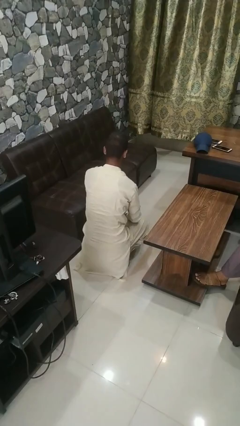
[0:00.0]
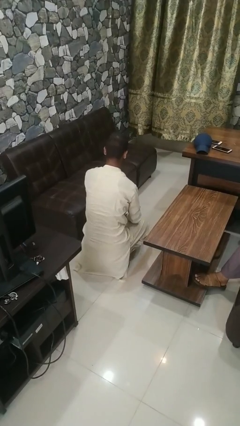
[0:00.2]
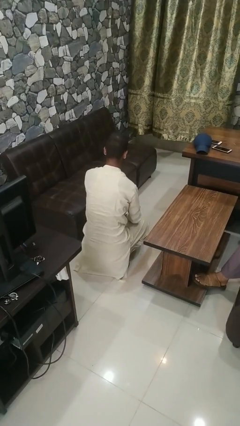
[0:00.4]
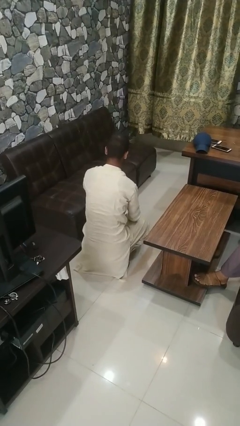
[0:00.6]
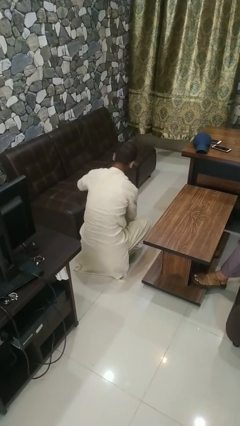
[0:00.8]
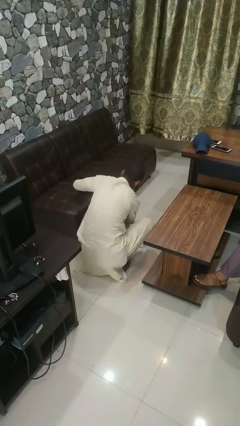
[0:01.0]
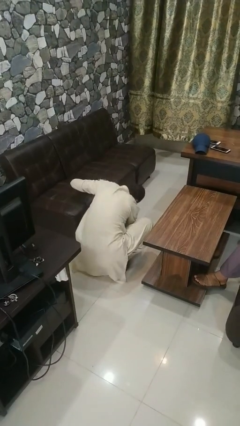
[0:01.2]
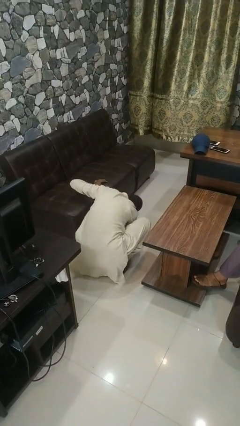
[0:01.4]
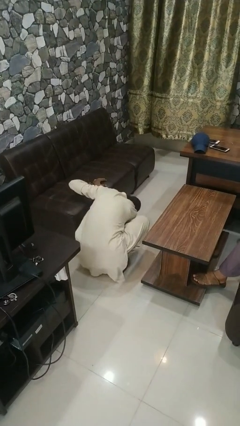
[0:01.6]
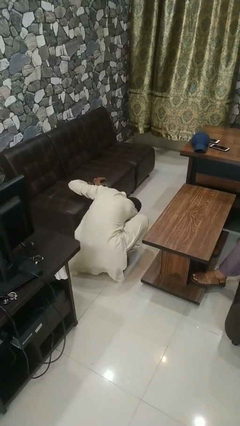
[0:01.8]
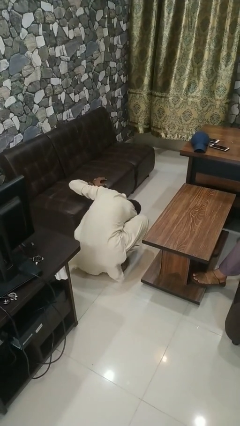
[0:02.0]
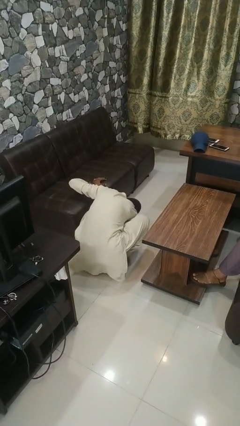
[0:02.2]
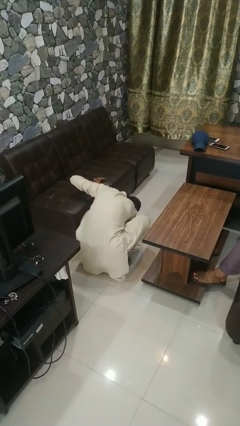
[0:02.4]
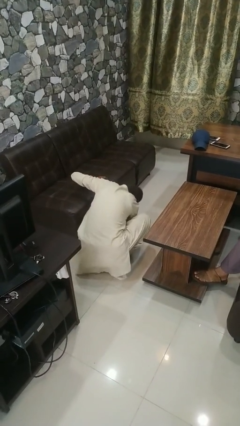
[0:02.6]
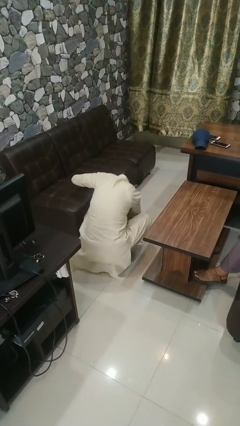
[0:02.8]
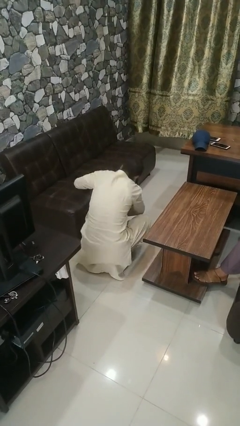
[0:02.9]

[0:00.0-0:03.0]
person searches under couch

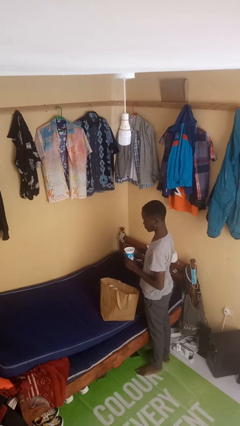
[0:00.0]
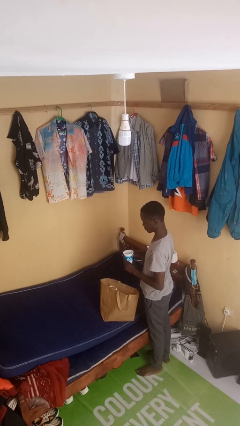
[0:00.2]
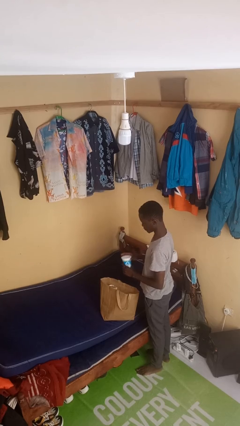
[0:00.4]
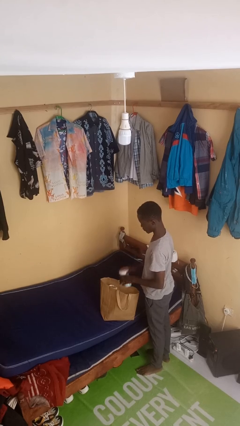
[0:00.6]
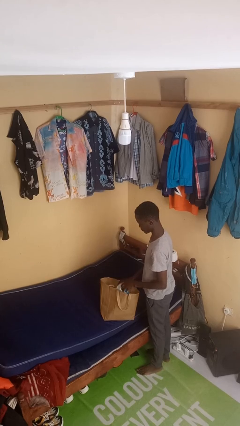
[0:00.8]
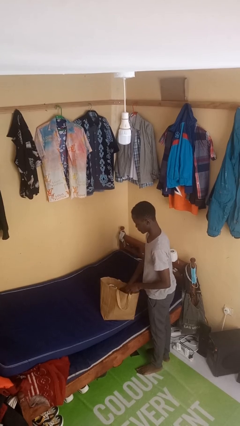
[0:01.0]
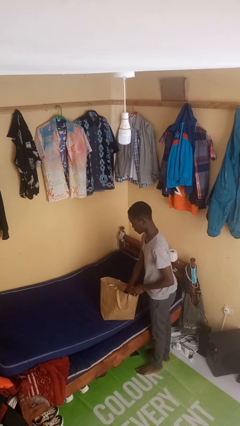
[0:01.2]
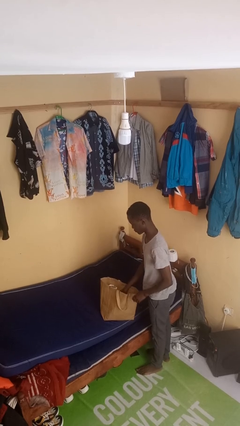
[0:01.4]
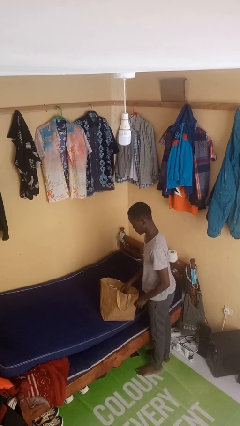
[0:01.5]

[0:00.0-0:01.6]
person puts object into bag

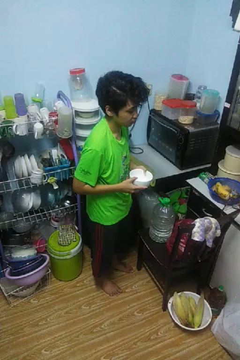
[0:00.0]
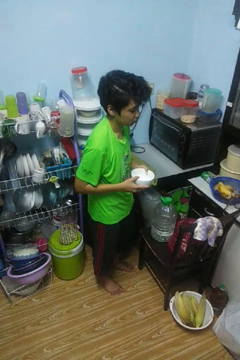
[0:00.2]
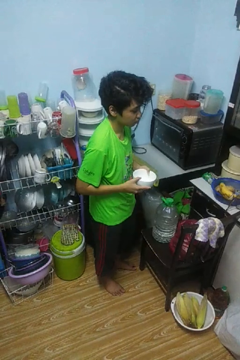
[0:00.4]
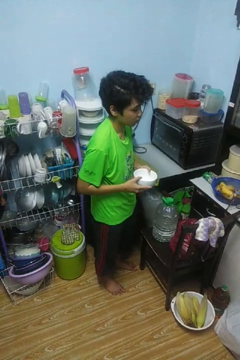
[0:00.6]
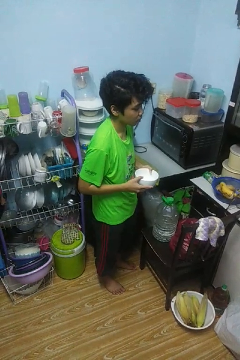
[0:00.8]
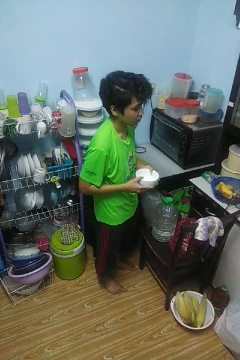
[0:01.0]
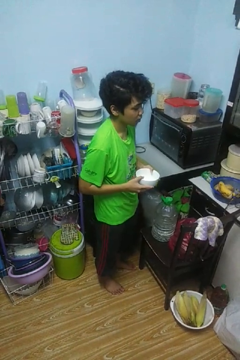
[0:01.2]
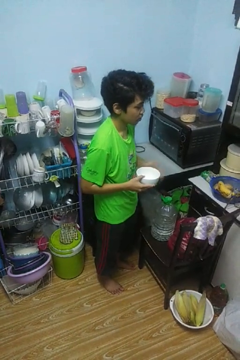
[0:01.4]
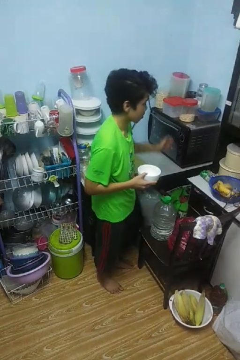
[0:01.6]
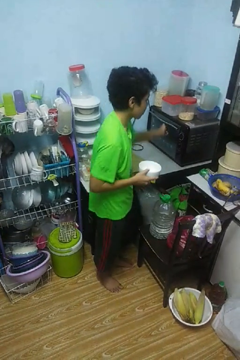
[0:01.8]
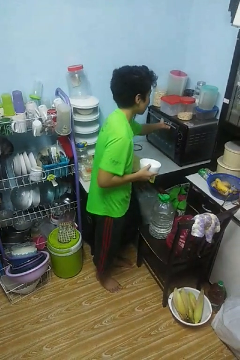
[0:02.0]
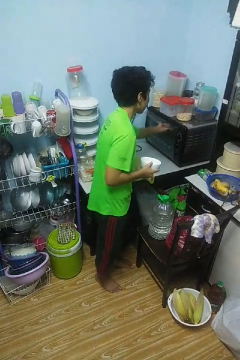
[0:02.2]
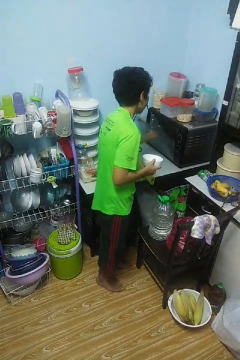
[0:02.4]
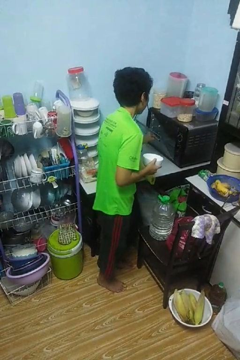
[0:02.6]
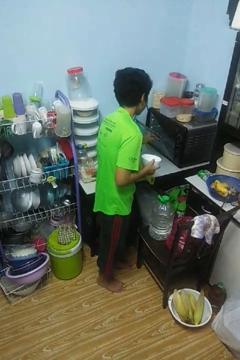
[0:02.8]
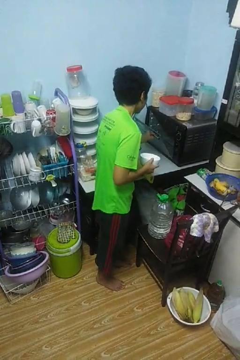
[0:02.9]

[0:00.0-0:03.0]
person opens microwave

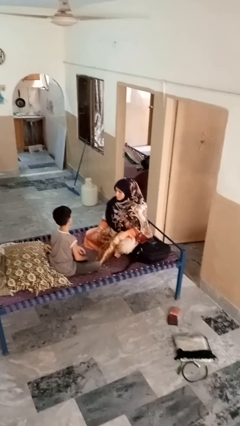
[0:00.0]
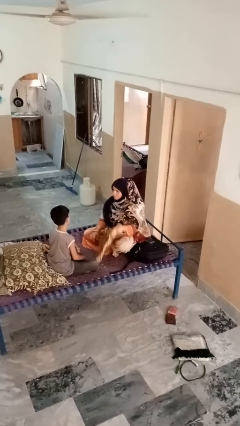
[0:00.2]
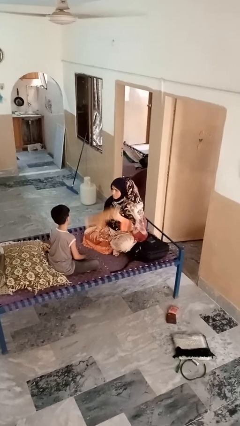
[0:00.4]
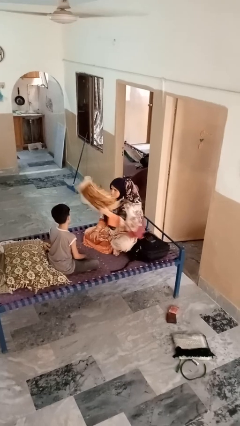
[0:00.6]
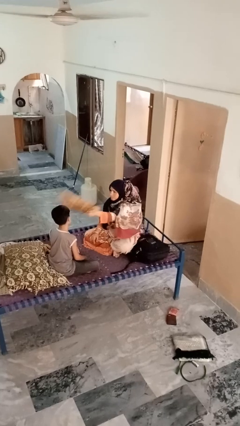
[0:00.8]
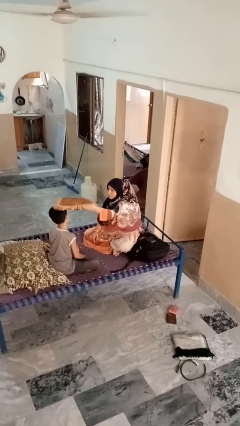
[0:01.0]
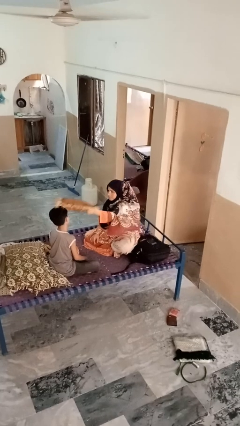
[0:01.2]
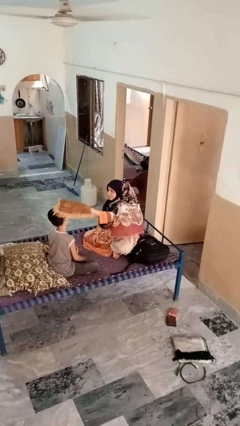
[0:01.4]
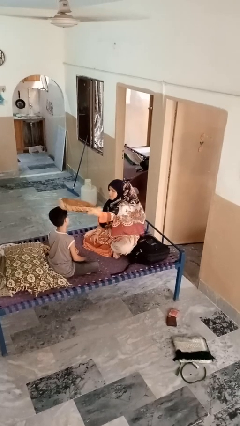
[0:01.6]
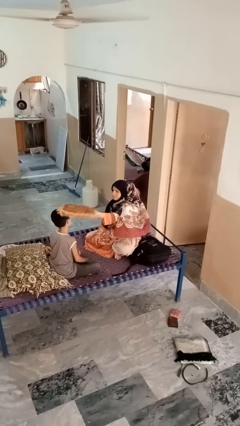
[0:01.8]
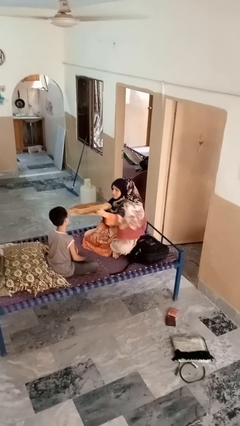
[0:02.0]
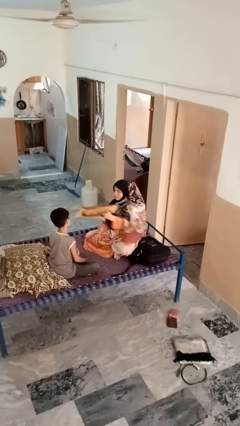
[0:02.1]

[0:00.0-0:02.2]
person hits person with pillow

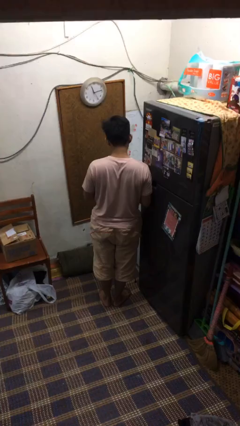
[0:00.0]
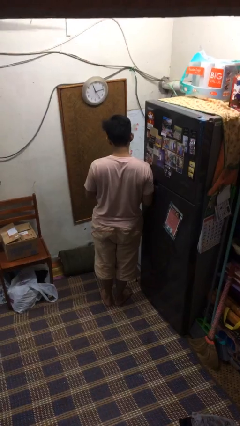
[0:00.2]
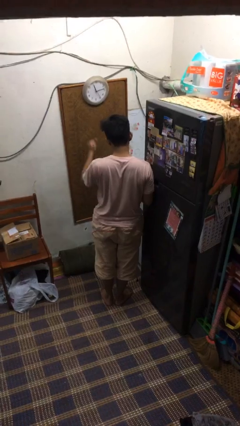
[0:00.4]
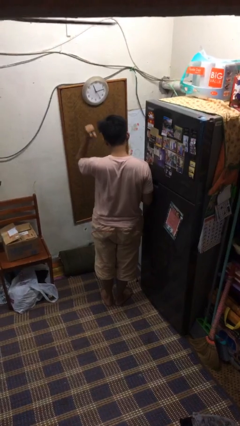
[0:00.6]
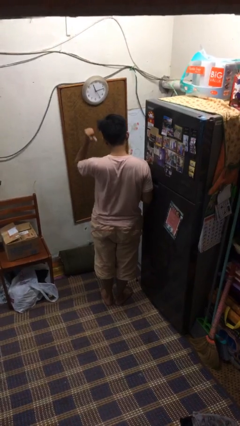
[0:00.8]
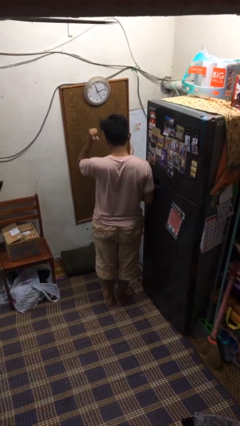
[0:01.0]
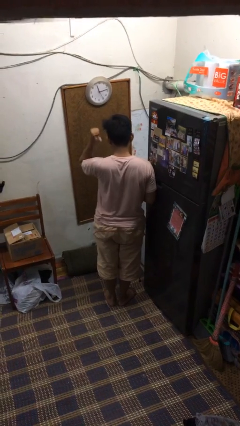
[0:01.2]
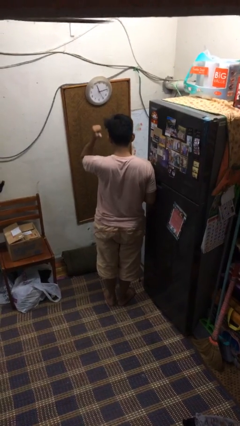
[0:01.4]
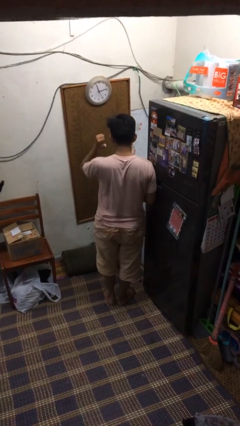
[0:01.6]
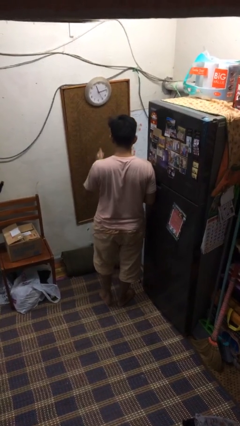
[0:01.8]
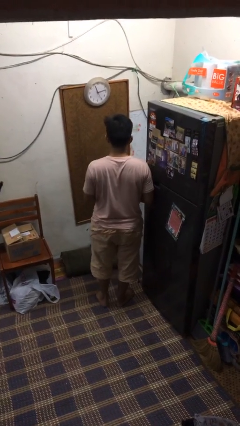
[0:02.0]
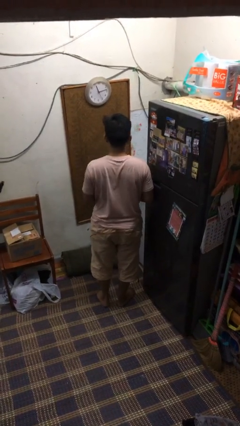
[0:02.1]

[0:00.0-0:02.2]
person gestures behind me

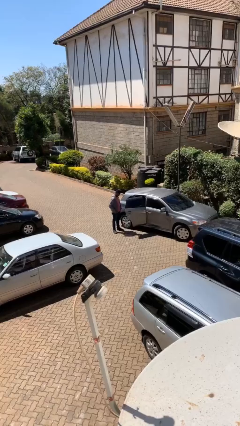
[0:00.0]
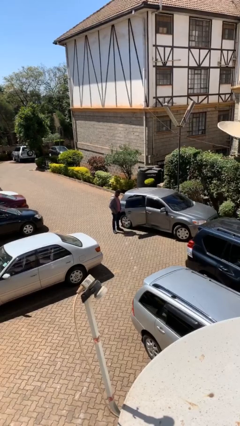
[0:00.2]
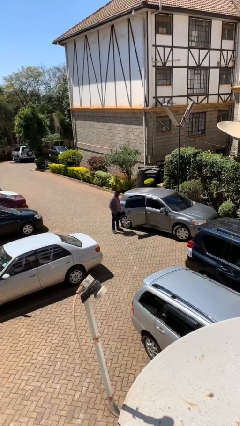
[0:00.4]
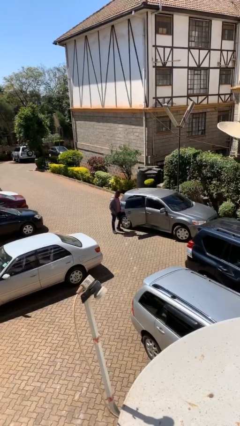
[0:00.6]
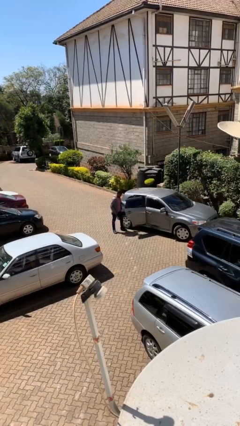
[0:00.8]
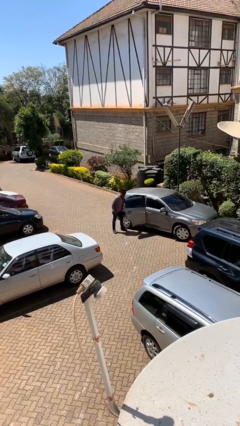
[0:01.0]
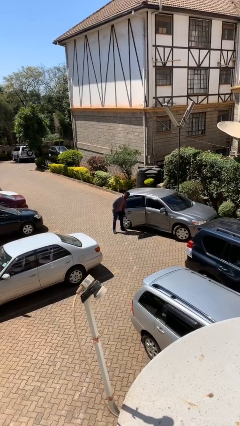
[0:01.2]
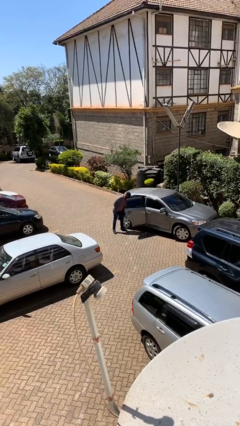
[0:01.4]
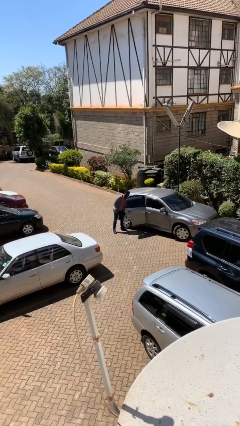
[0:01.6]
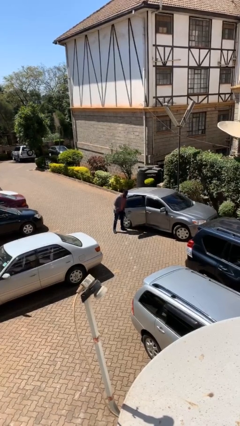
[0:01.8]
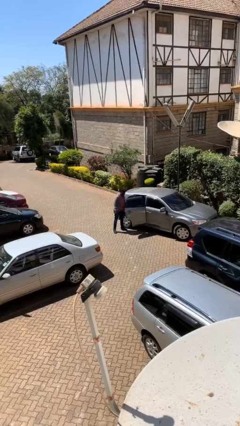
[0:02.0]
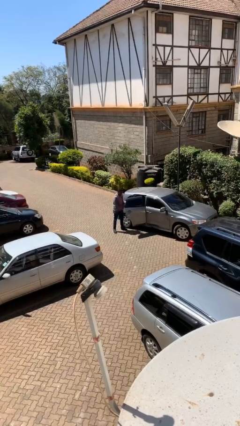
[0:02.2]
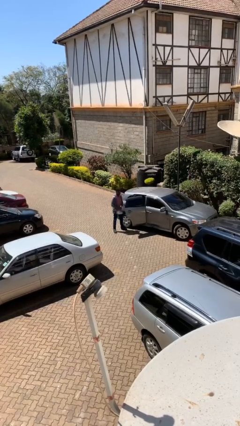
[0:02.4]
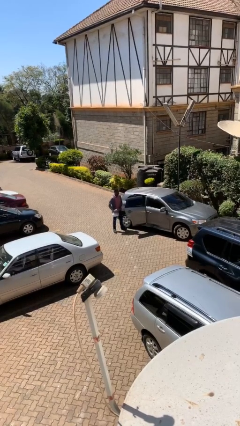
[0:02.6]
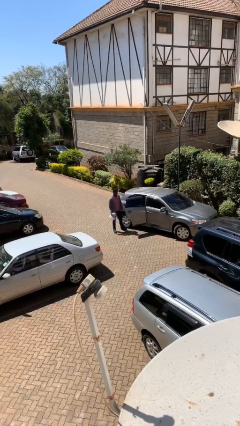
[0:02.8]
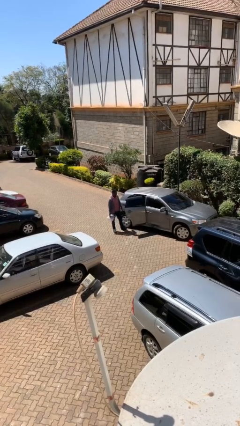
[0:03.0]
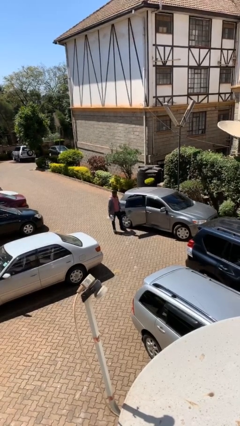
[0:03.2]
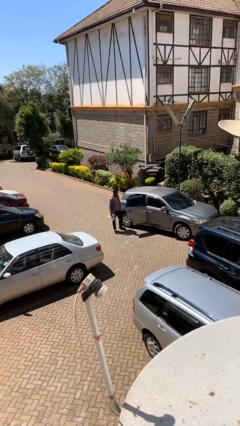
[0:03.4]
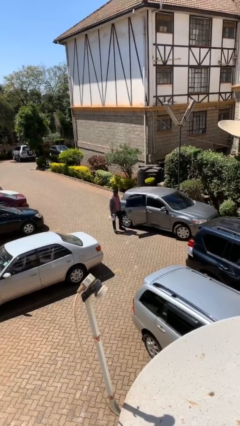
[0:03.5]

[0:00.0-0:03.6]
person unloads car

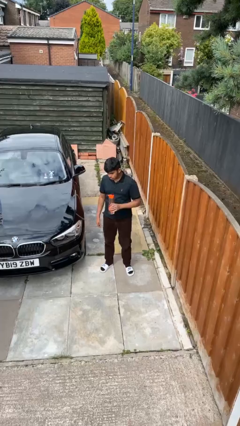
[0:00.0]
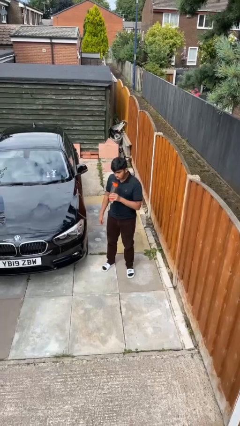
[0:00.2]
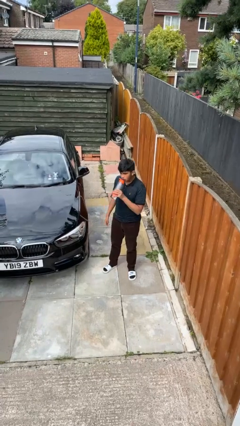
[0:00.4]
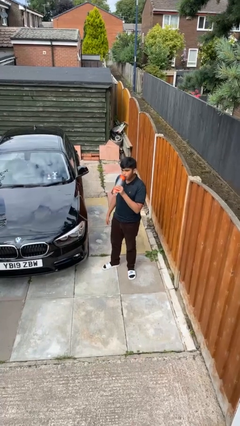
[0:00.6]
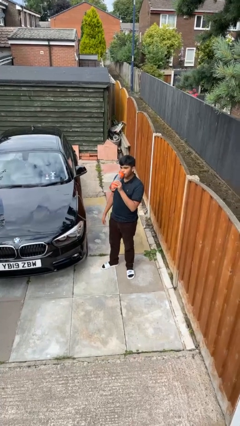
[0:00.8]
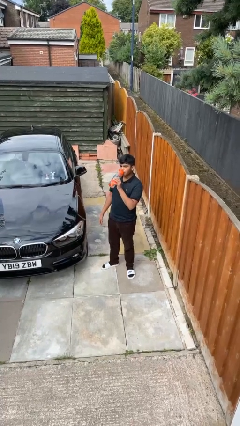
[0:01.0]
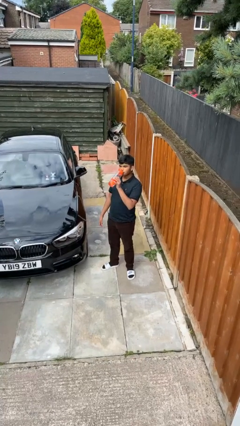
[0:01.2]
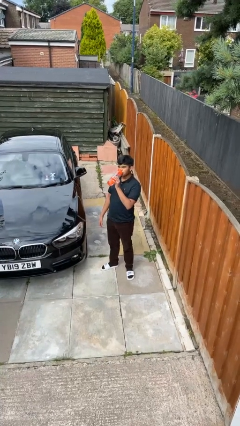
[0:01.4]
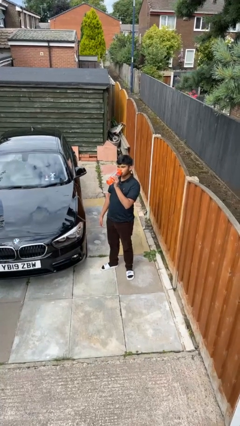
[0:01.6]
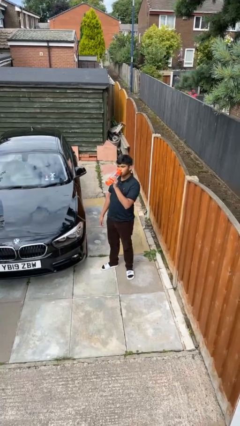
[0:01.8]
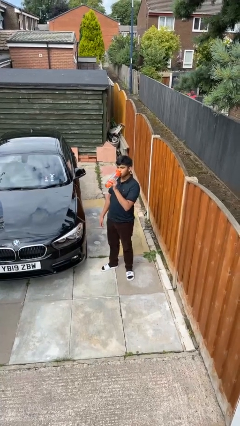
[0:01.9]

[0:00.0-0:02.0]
person drinks from bottle
